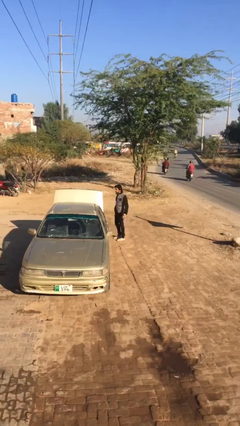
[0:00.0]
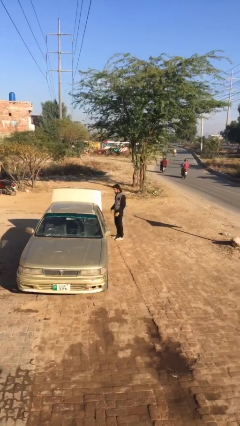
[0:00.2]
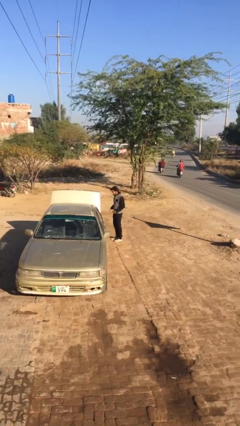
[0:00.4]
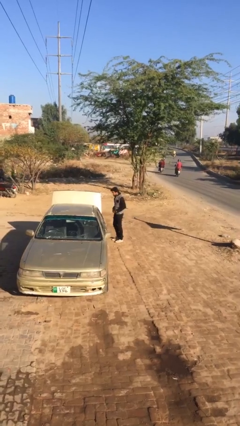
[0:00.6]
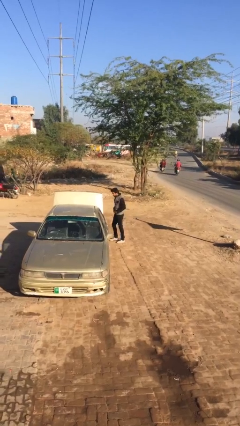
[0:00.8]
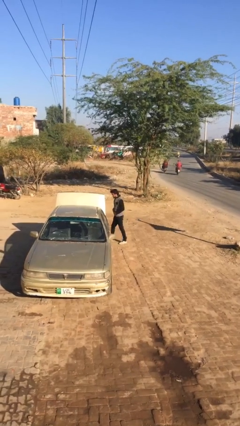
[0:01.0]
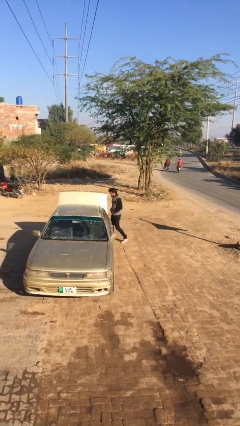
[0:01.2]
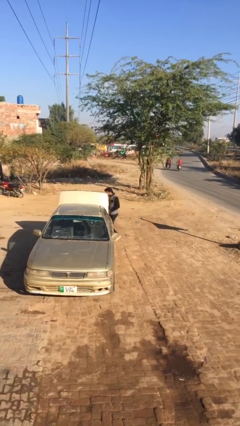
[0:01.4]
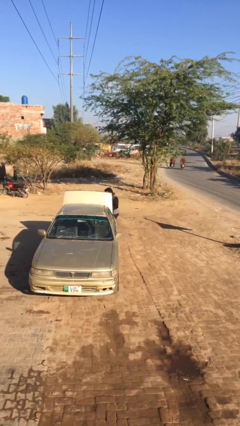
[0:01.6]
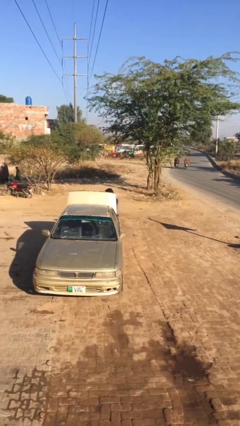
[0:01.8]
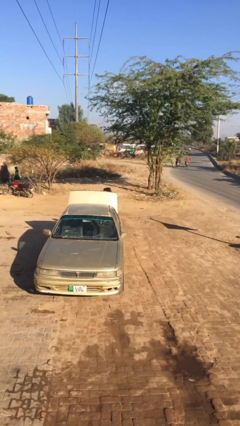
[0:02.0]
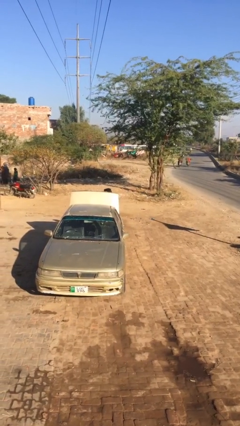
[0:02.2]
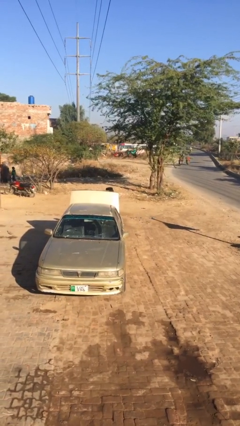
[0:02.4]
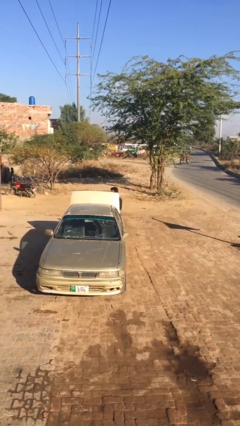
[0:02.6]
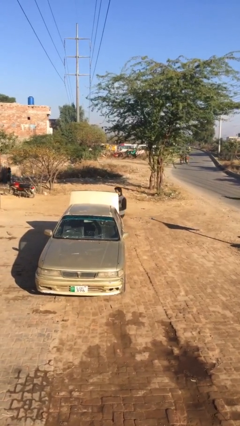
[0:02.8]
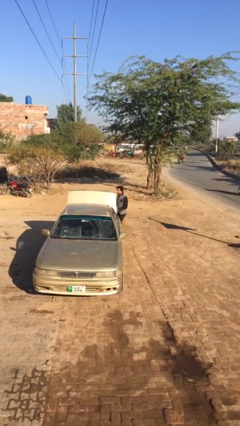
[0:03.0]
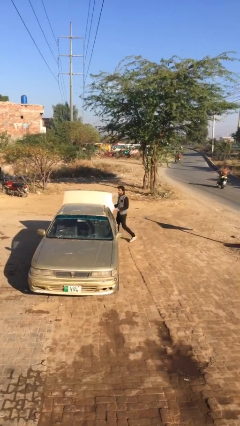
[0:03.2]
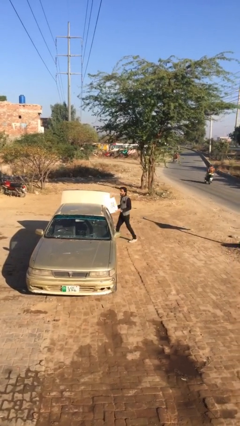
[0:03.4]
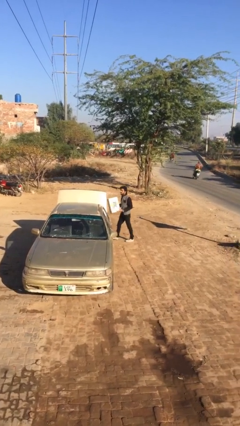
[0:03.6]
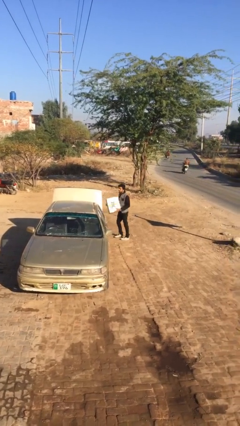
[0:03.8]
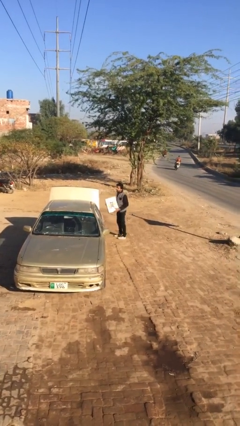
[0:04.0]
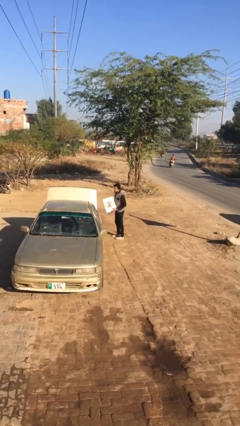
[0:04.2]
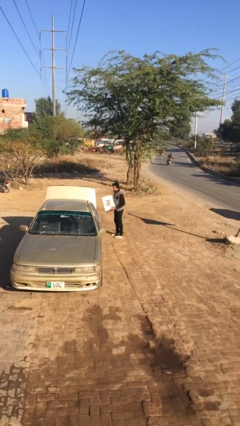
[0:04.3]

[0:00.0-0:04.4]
person unloads car

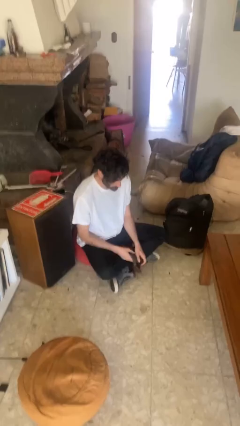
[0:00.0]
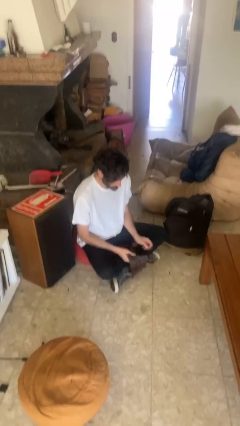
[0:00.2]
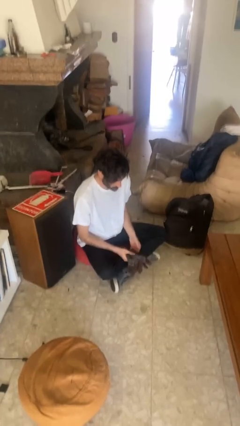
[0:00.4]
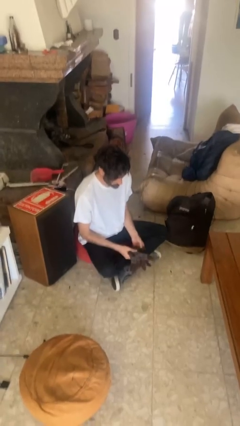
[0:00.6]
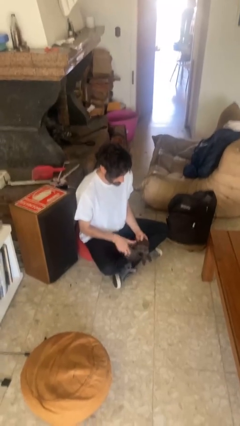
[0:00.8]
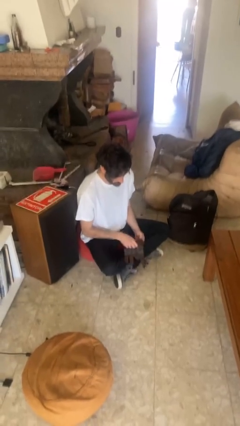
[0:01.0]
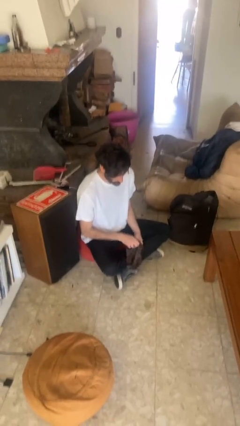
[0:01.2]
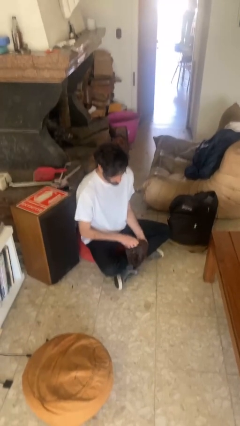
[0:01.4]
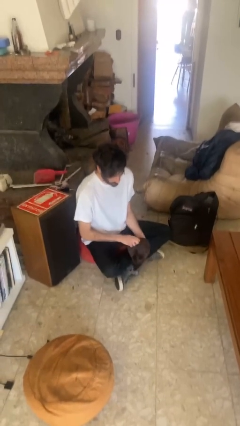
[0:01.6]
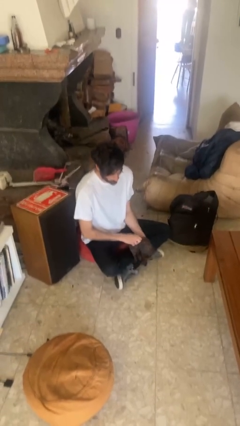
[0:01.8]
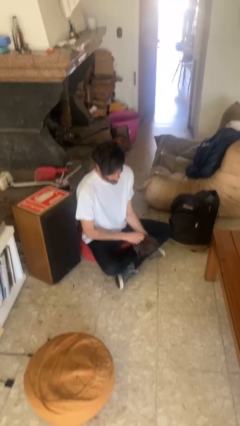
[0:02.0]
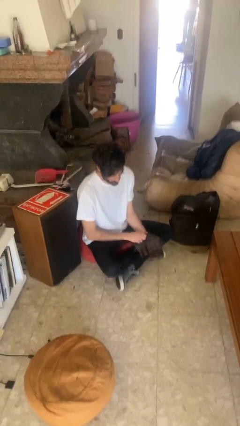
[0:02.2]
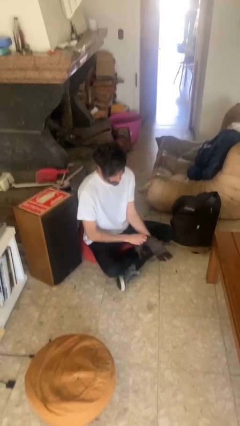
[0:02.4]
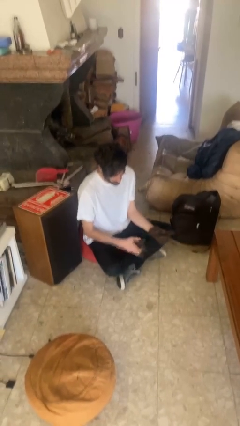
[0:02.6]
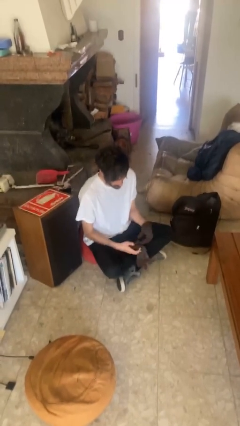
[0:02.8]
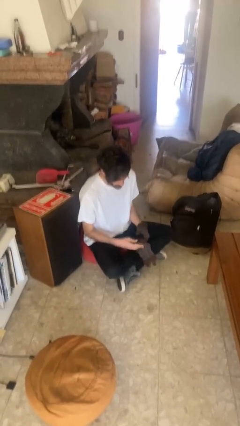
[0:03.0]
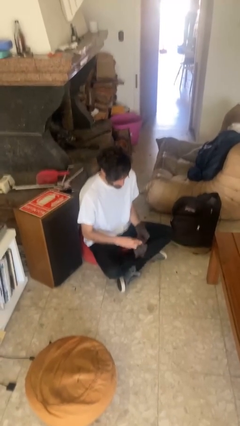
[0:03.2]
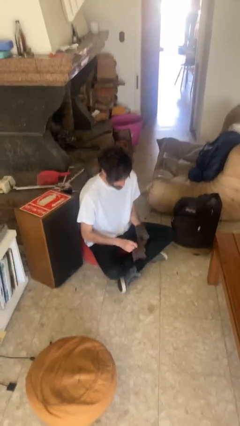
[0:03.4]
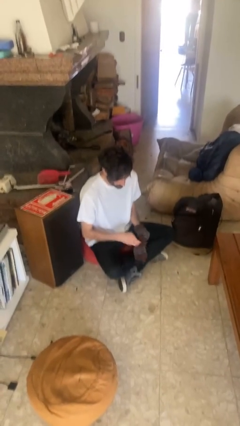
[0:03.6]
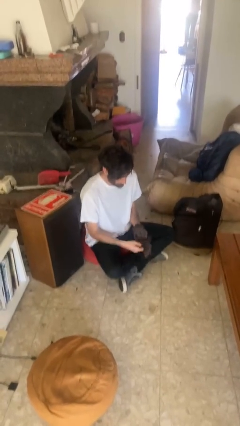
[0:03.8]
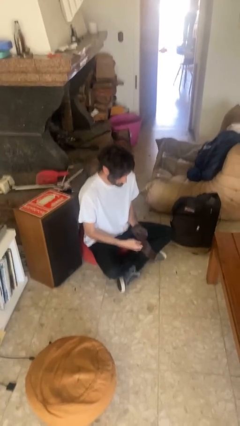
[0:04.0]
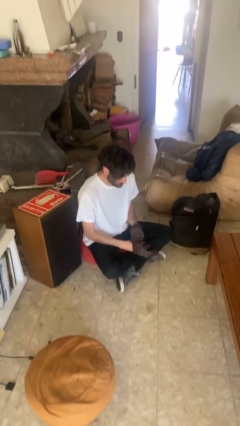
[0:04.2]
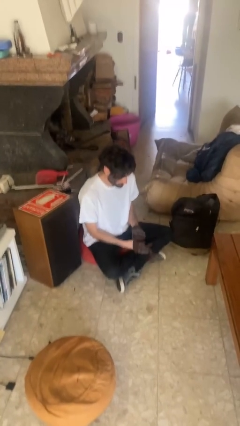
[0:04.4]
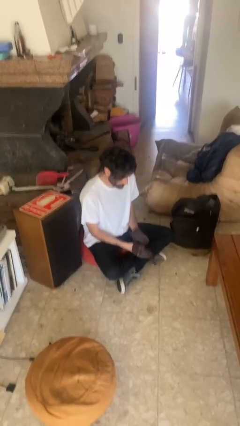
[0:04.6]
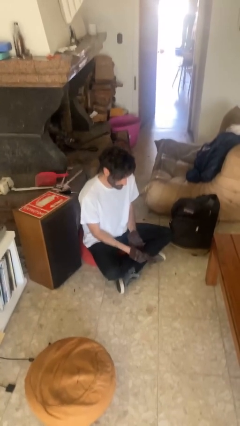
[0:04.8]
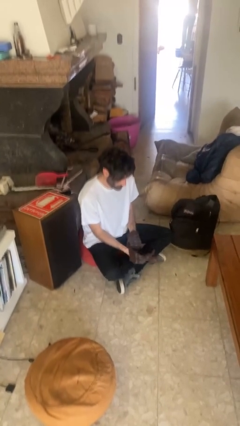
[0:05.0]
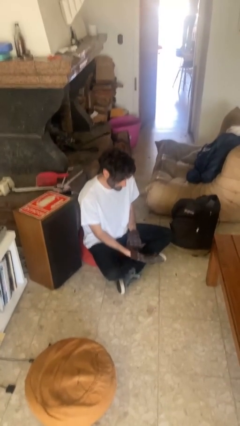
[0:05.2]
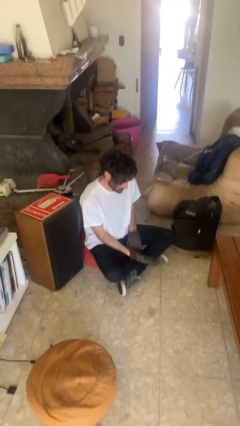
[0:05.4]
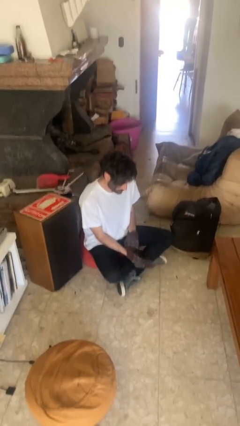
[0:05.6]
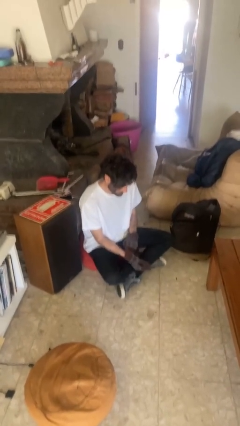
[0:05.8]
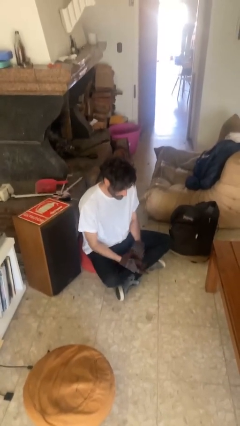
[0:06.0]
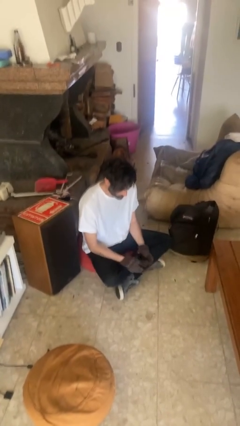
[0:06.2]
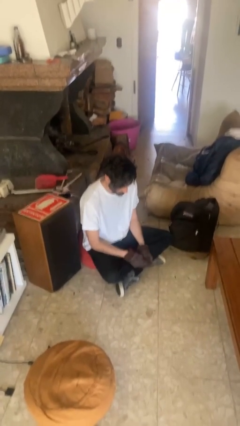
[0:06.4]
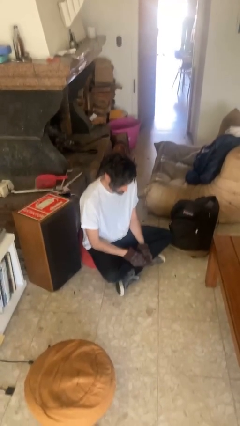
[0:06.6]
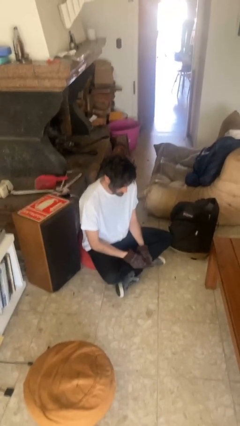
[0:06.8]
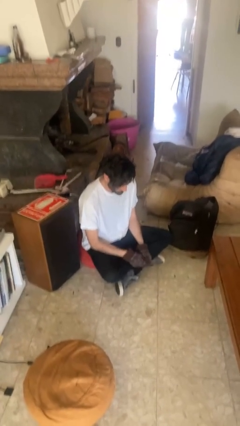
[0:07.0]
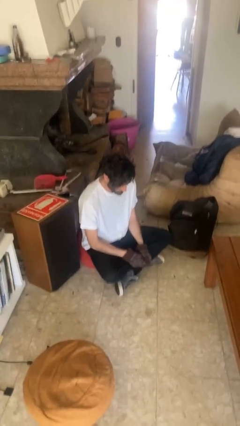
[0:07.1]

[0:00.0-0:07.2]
person puts on gloves

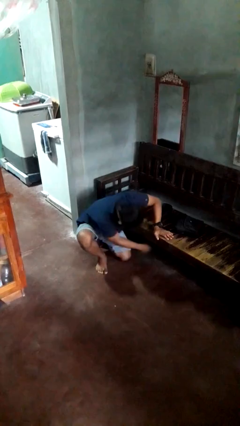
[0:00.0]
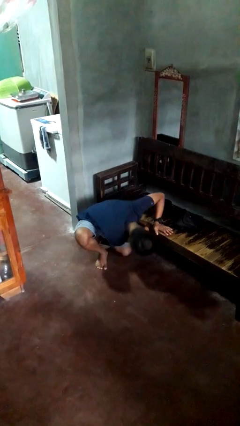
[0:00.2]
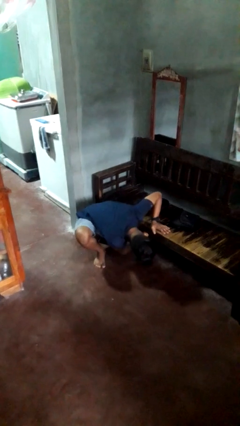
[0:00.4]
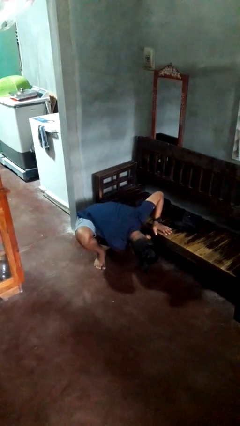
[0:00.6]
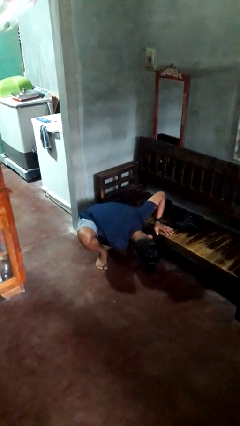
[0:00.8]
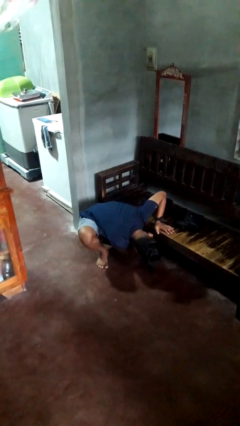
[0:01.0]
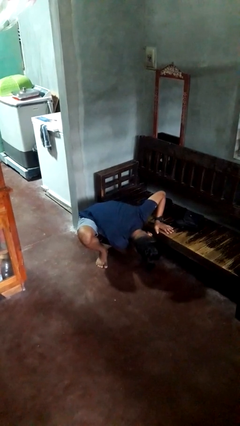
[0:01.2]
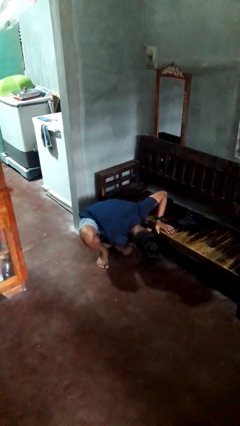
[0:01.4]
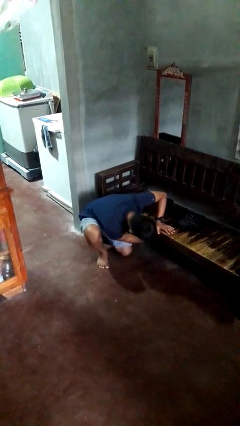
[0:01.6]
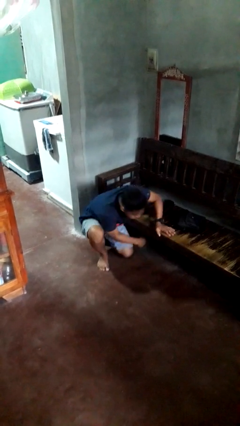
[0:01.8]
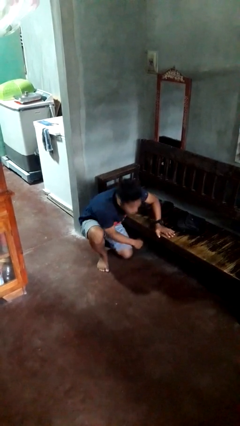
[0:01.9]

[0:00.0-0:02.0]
person searches under couch

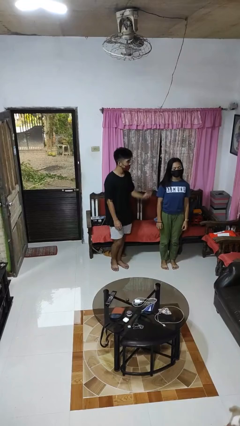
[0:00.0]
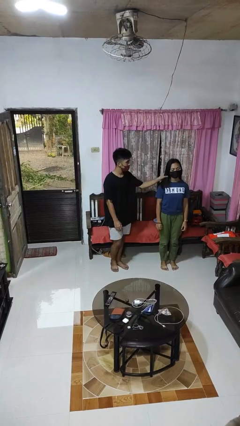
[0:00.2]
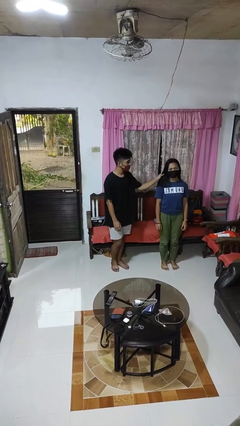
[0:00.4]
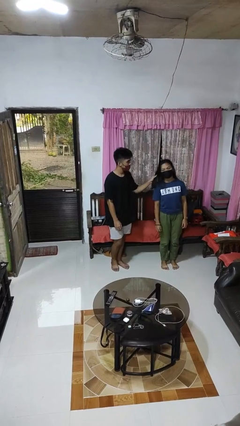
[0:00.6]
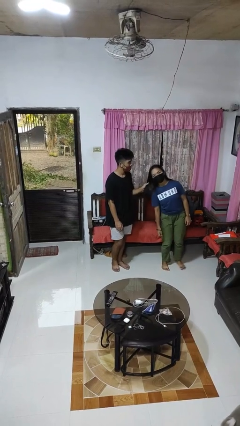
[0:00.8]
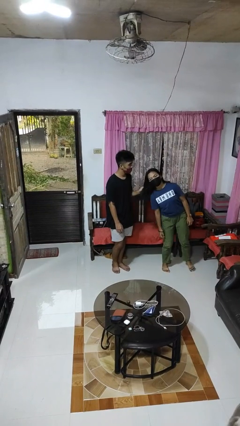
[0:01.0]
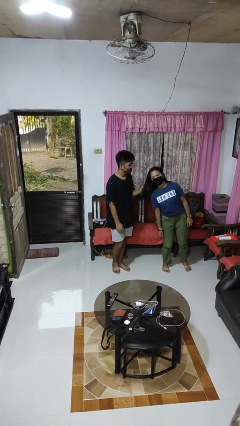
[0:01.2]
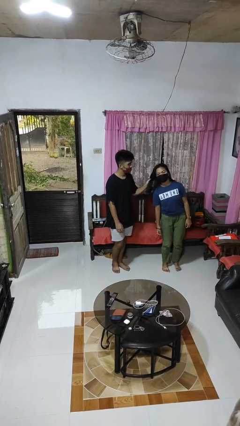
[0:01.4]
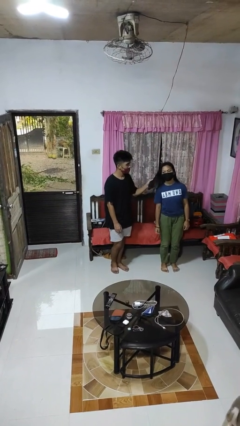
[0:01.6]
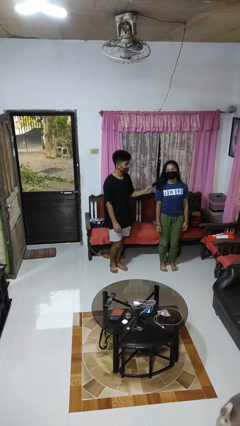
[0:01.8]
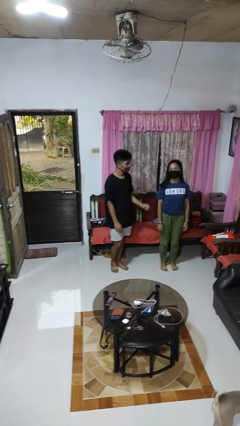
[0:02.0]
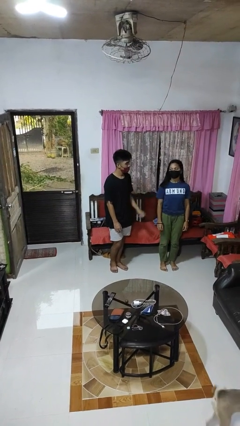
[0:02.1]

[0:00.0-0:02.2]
person grabs person by hair

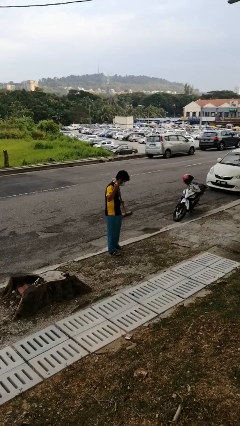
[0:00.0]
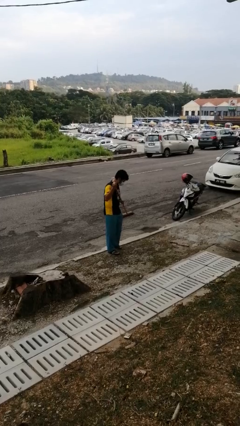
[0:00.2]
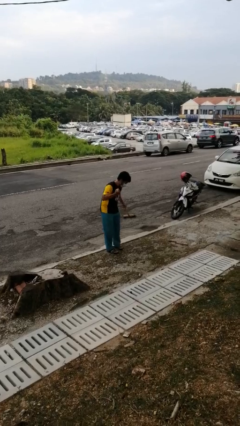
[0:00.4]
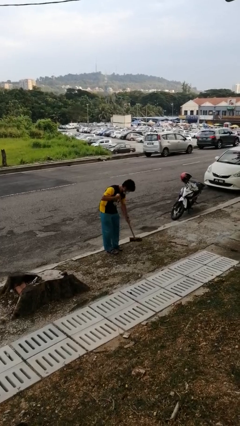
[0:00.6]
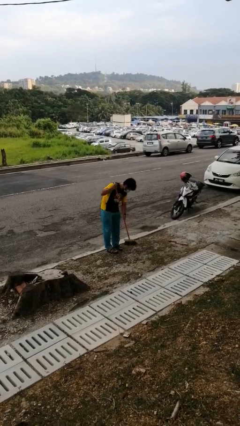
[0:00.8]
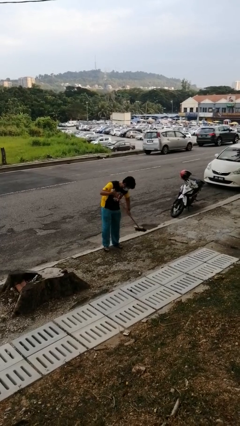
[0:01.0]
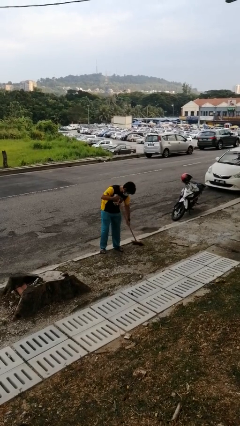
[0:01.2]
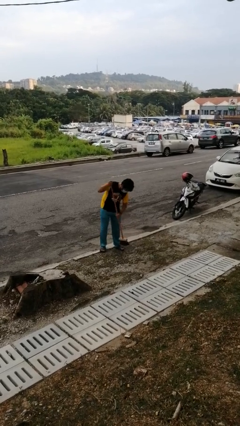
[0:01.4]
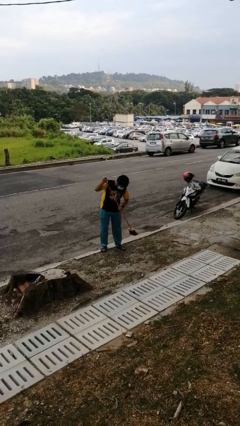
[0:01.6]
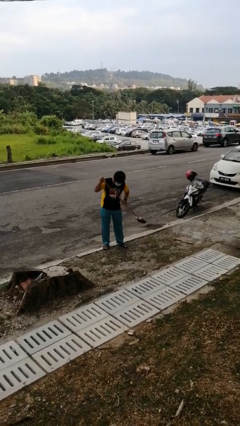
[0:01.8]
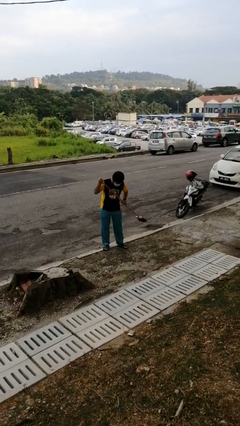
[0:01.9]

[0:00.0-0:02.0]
person sweeps floor
